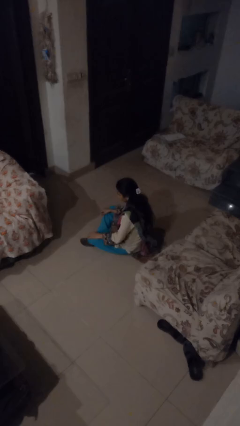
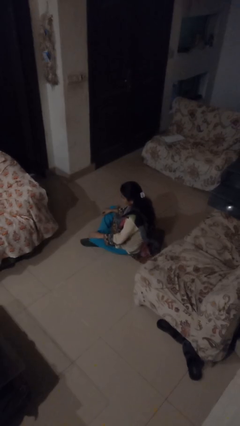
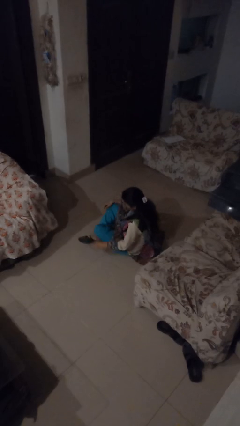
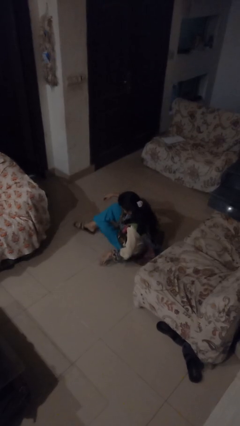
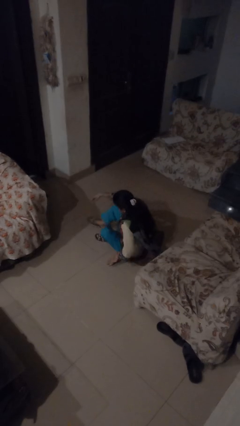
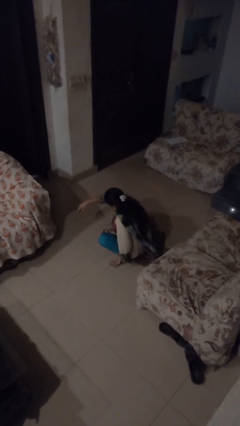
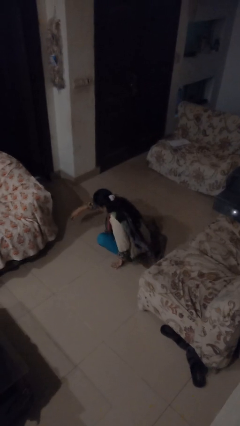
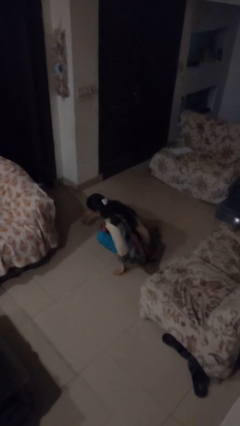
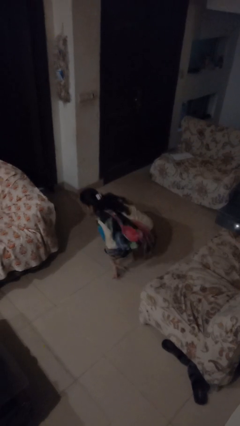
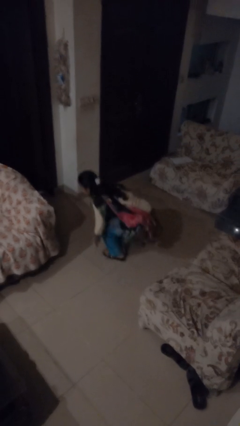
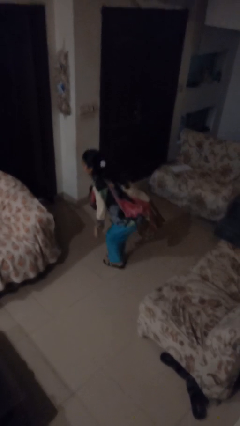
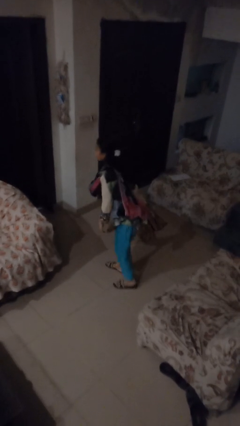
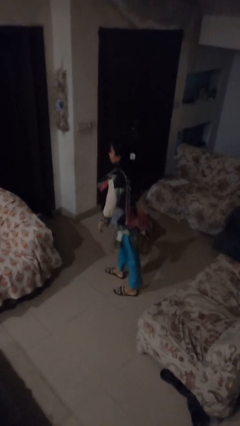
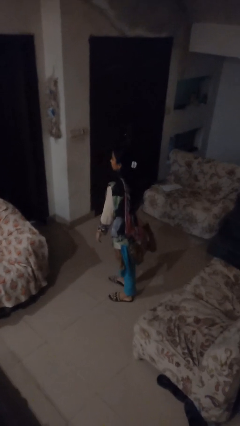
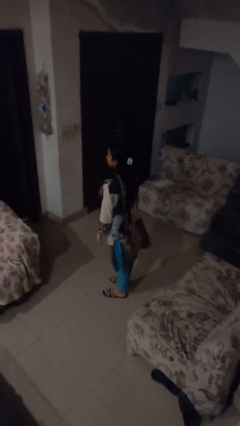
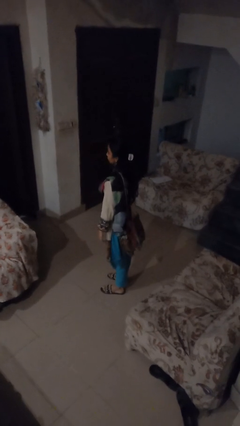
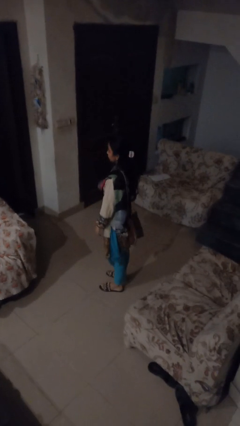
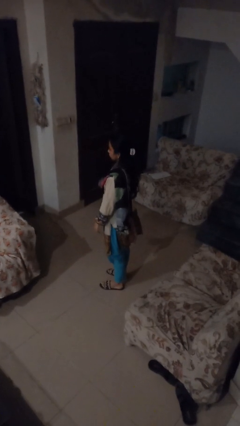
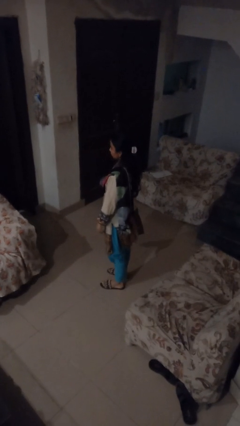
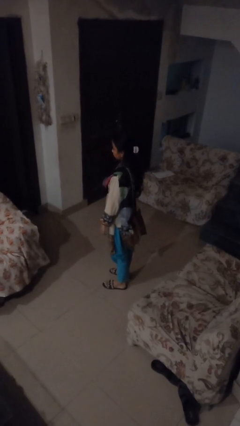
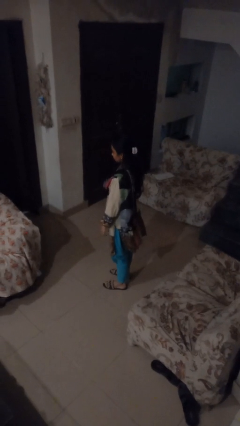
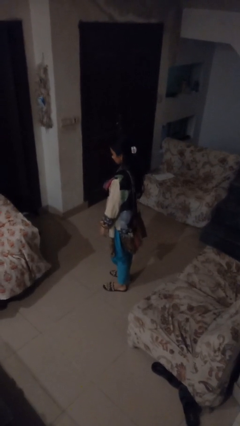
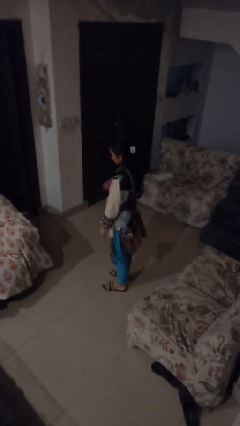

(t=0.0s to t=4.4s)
person stands up from floor

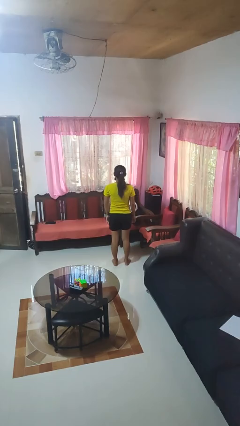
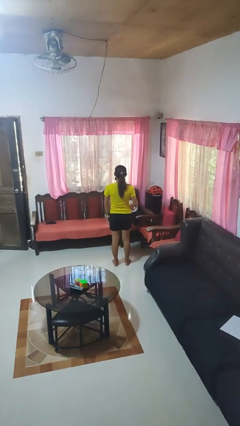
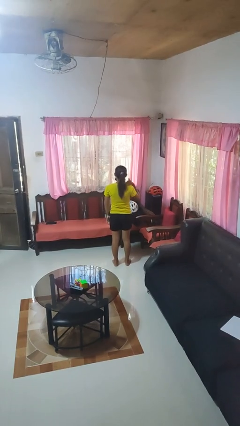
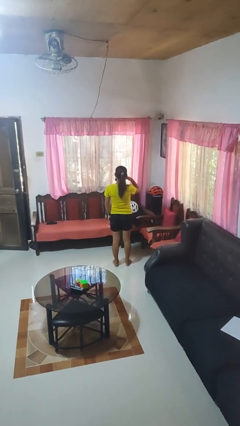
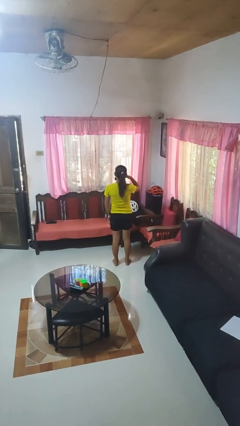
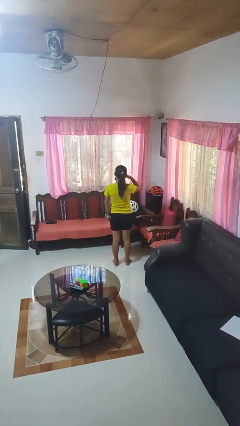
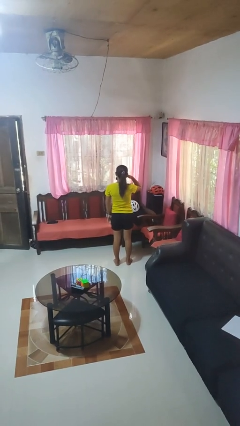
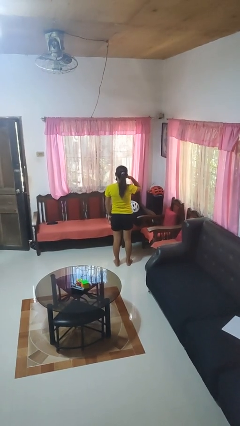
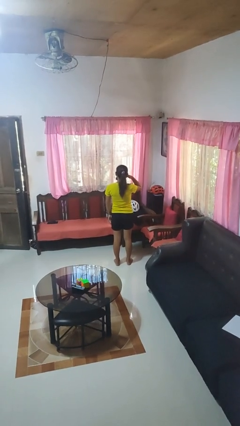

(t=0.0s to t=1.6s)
person gestures call me

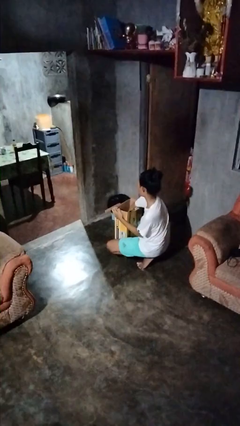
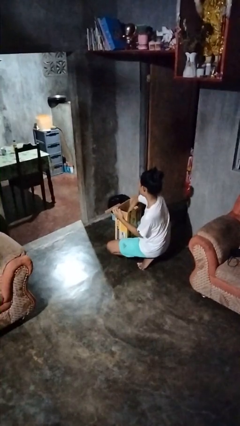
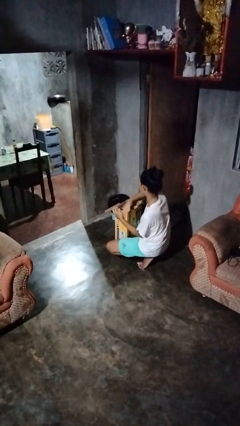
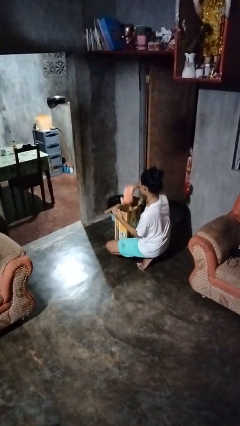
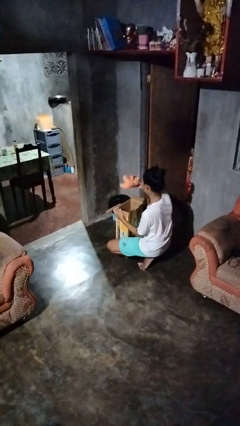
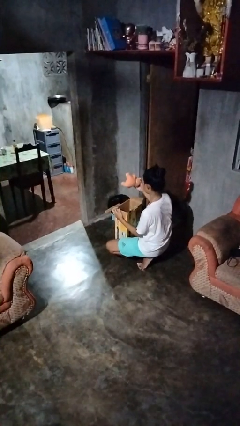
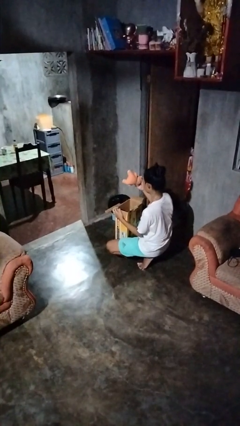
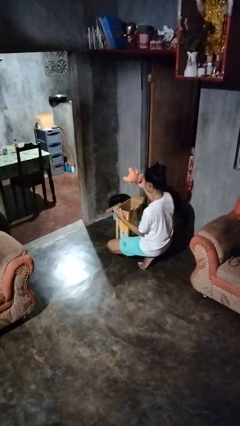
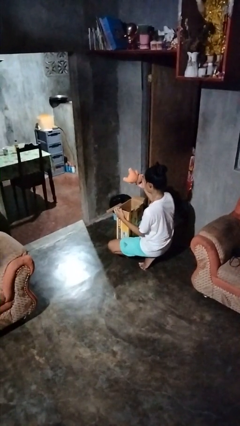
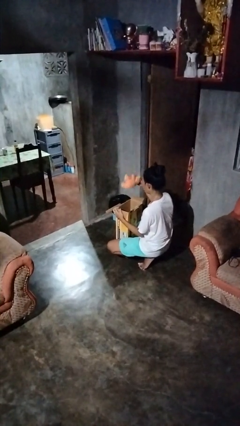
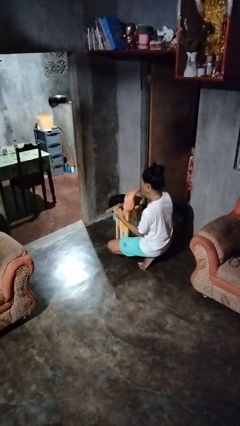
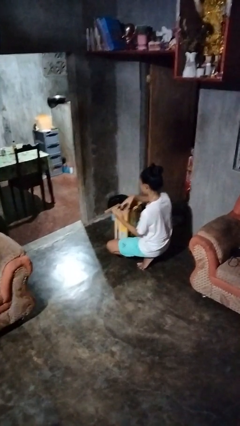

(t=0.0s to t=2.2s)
person takes object from box

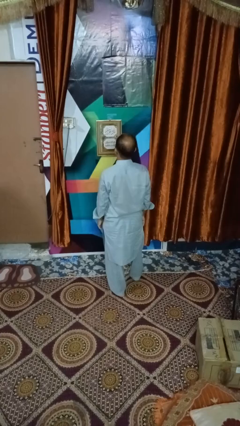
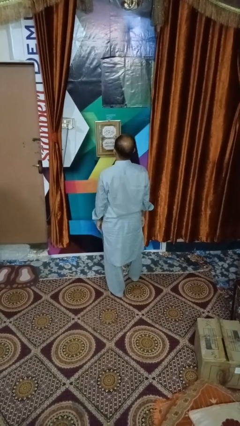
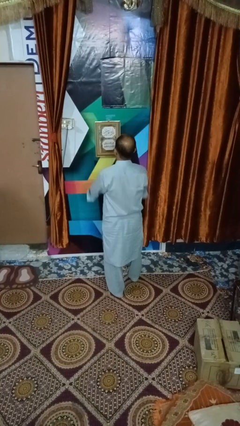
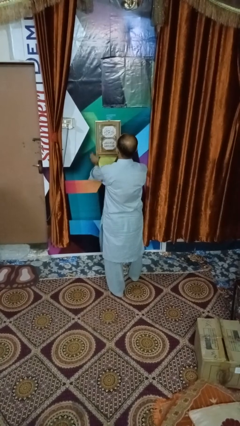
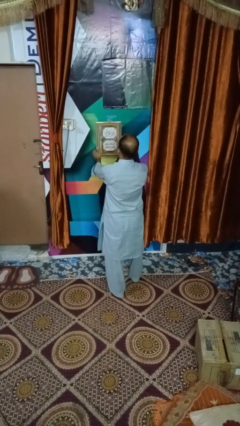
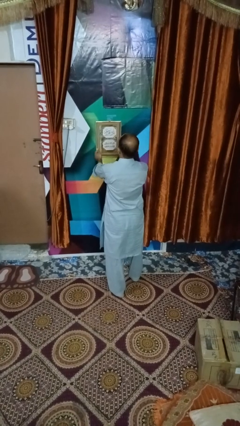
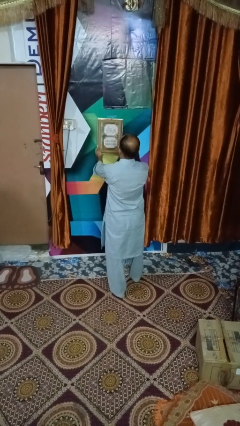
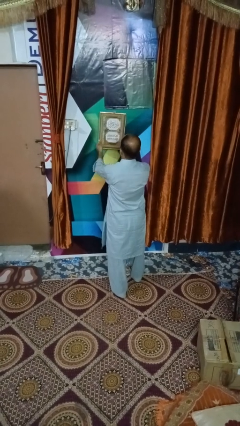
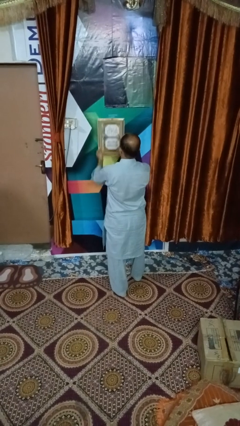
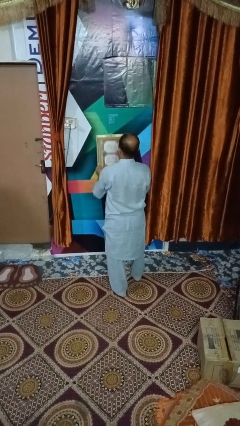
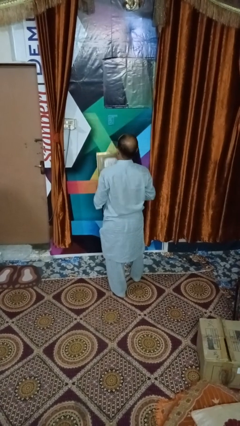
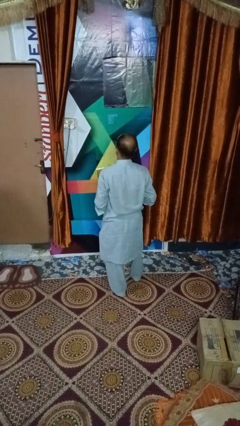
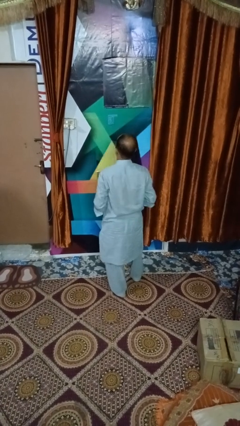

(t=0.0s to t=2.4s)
person takes down picture frame

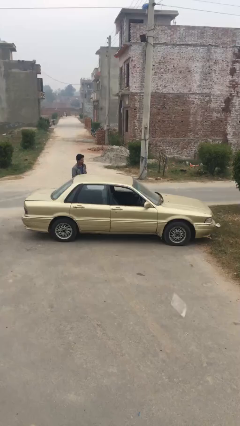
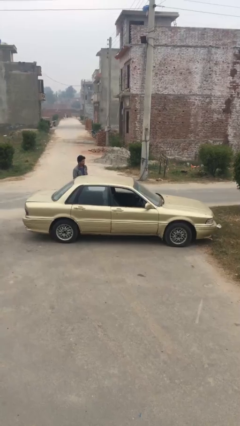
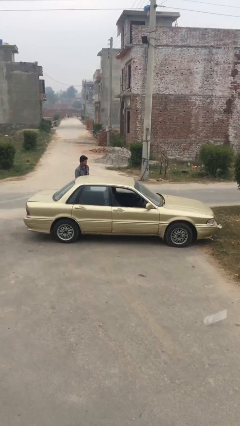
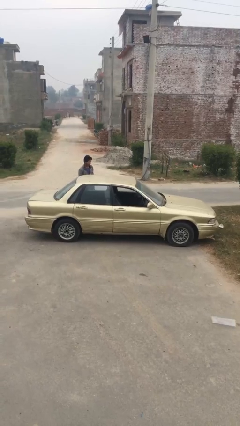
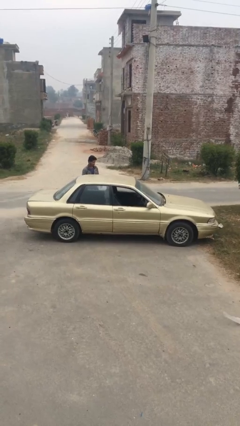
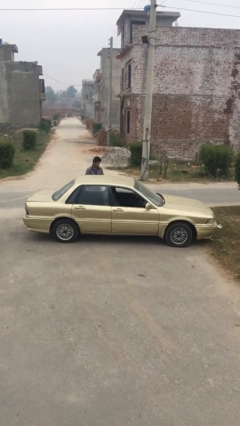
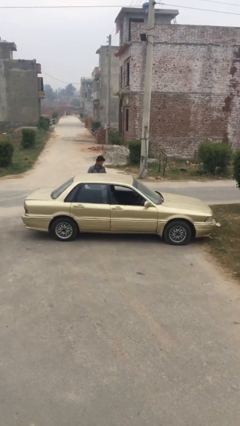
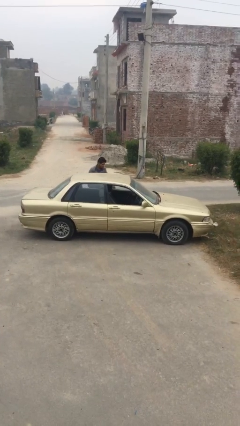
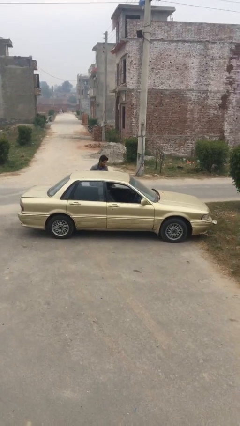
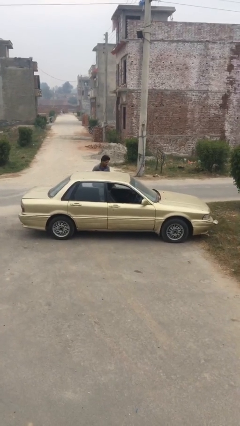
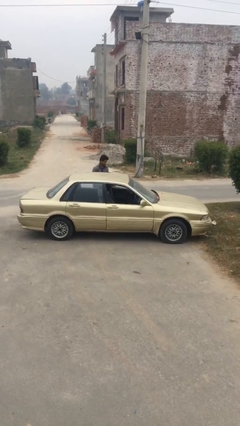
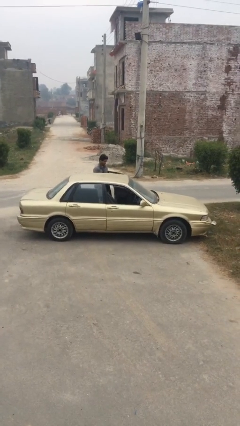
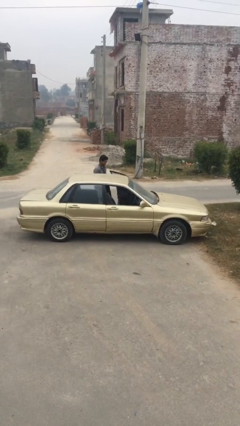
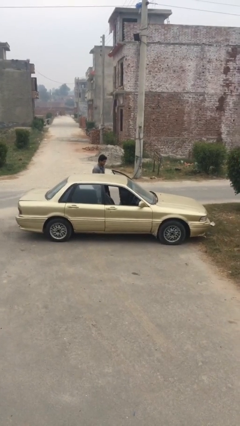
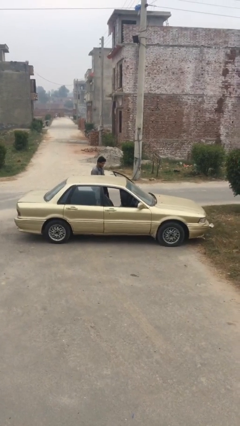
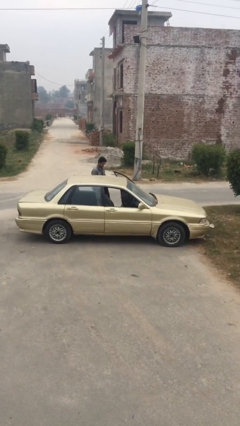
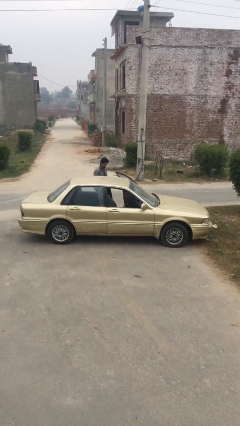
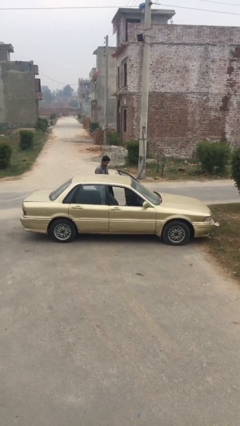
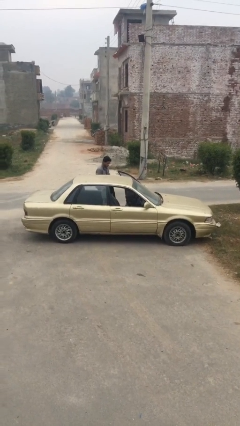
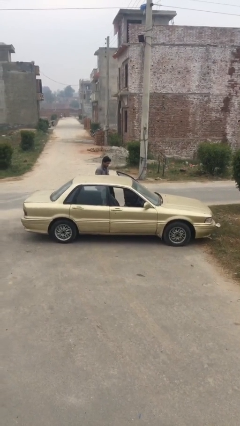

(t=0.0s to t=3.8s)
person opens car door

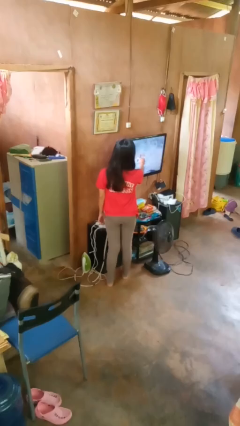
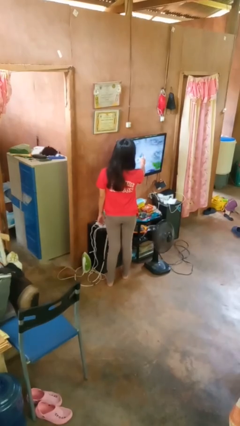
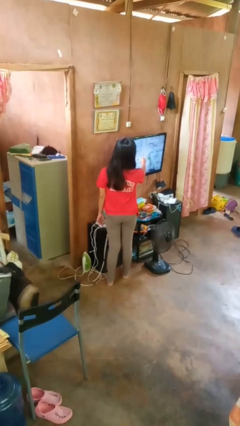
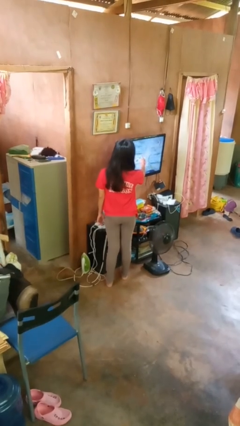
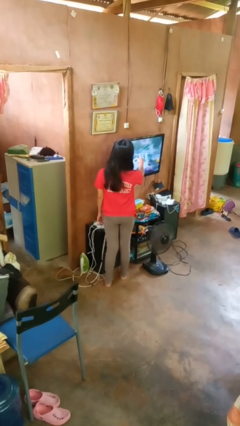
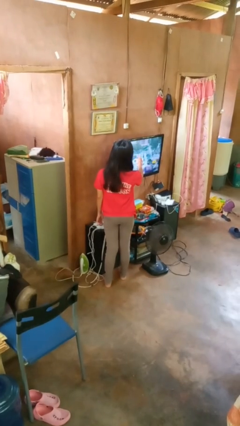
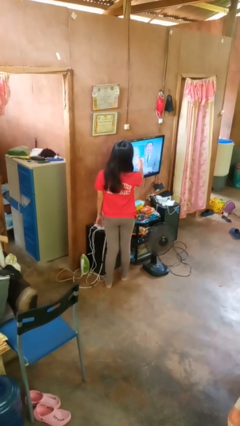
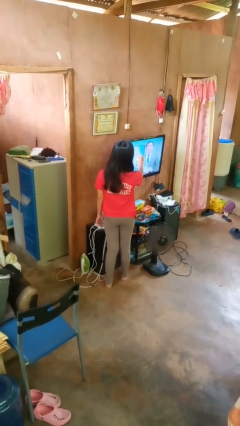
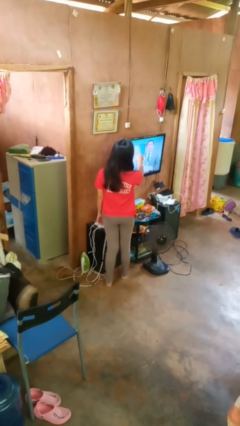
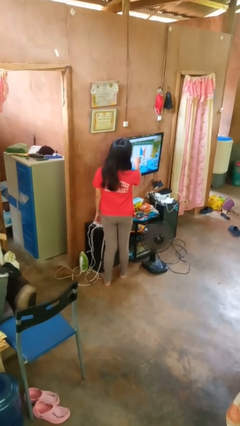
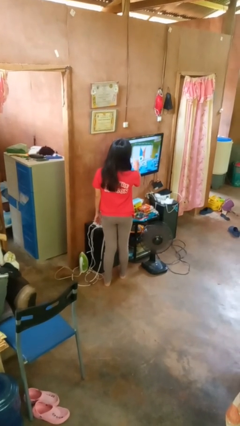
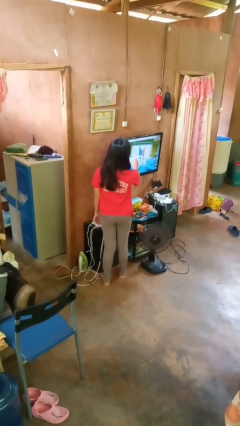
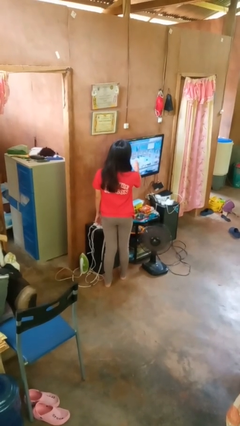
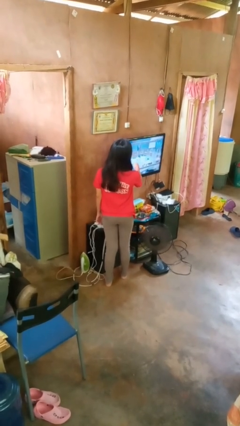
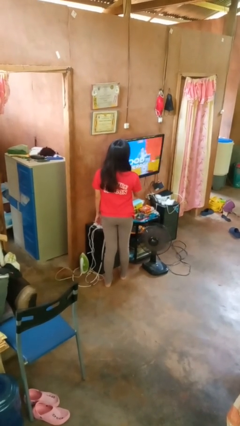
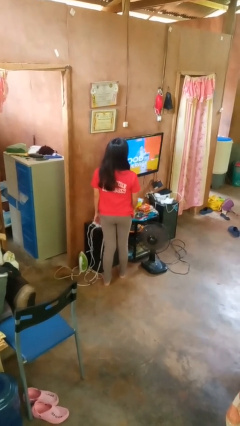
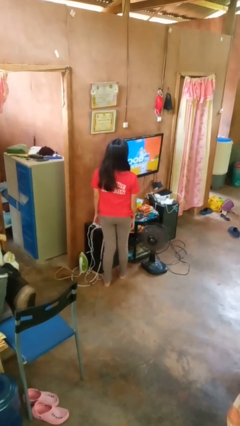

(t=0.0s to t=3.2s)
person taps object with finger
